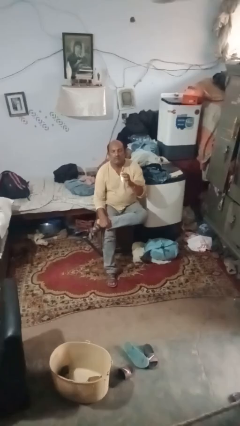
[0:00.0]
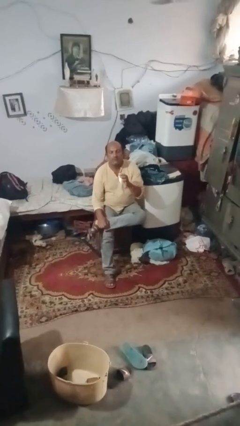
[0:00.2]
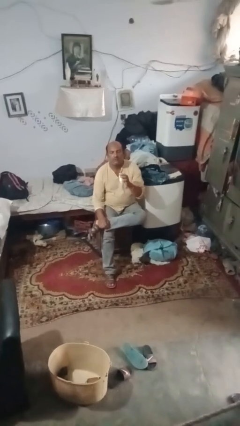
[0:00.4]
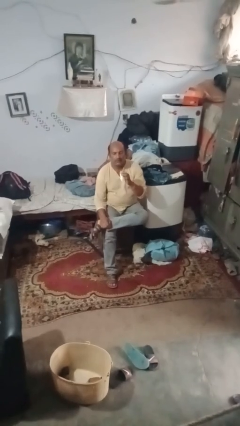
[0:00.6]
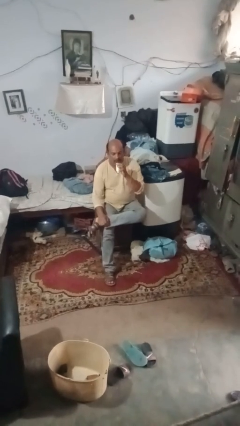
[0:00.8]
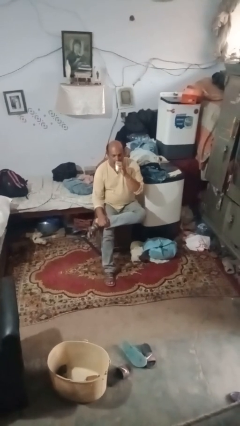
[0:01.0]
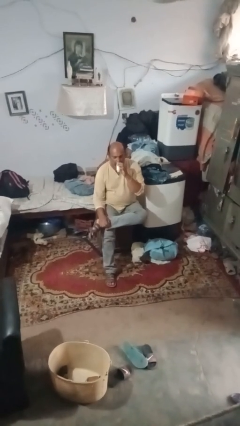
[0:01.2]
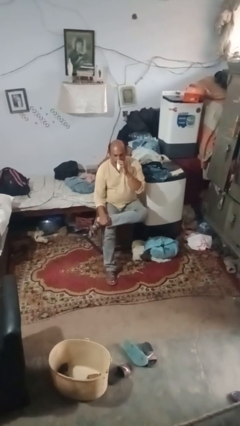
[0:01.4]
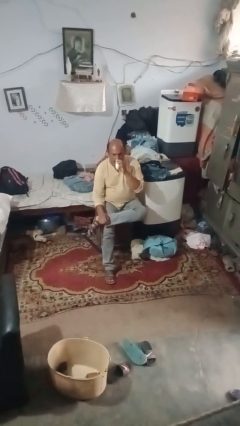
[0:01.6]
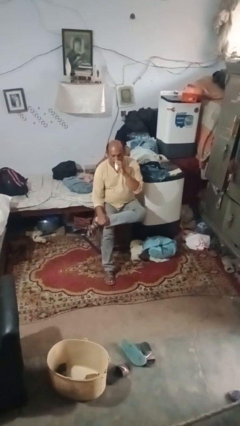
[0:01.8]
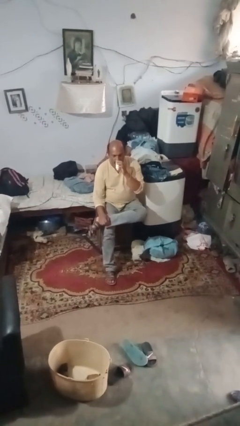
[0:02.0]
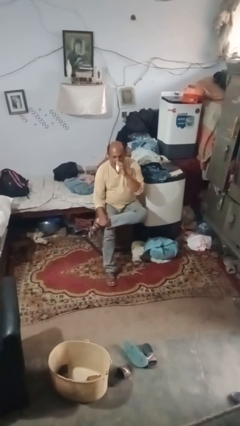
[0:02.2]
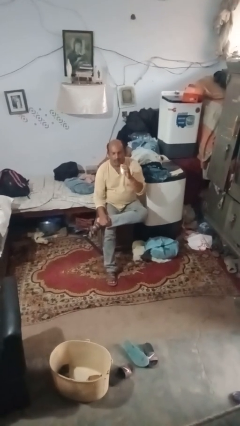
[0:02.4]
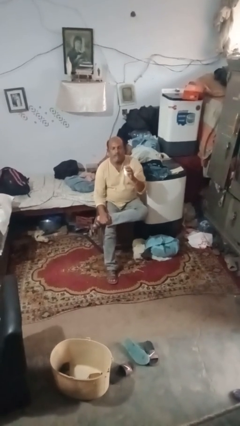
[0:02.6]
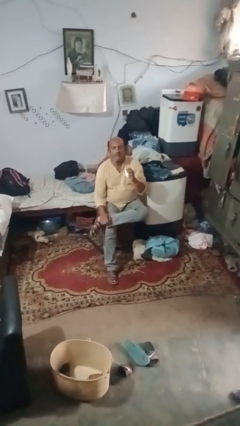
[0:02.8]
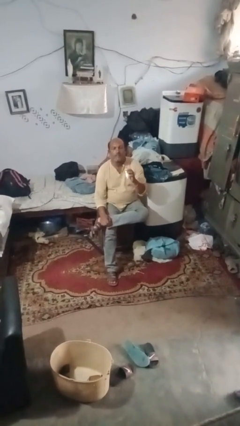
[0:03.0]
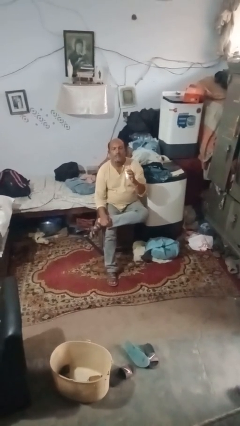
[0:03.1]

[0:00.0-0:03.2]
person vapes

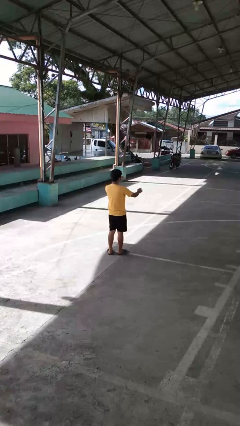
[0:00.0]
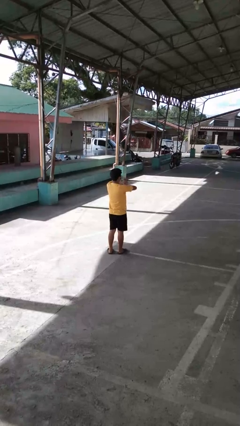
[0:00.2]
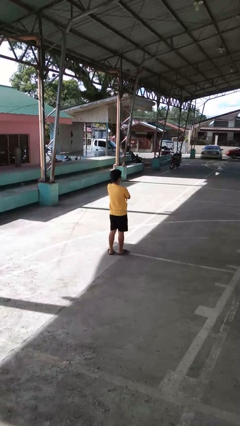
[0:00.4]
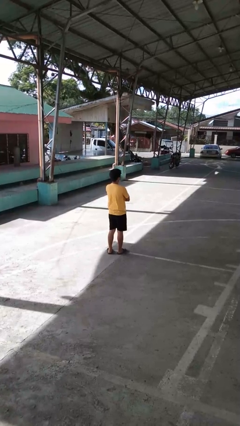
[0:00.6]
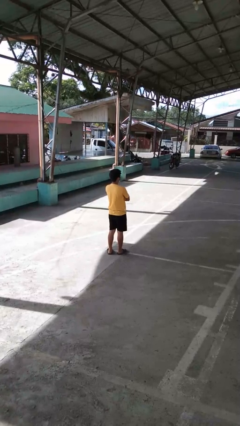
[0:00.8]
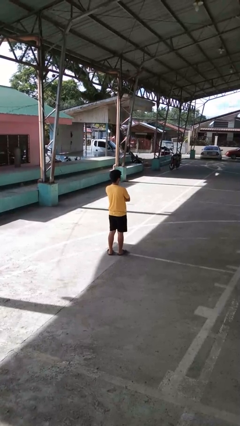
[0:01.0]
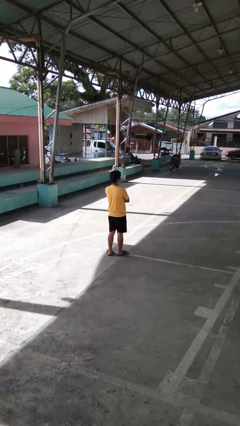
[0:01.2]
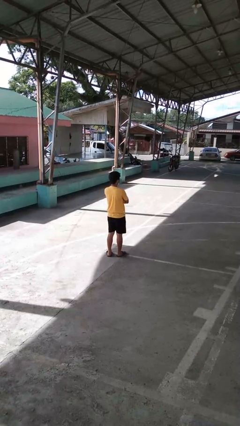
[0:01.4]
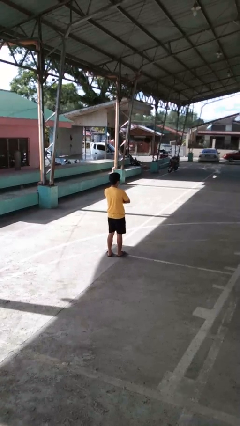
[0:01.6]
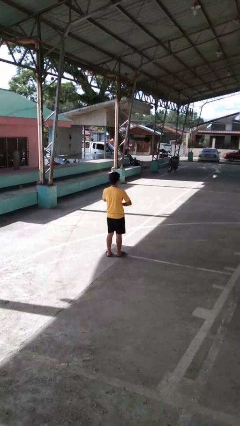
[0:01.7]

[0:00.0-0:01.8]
person crosses arms

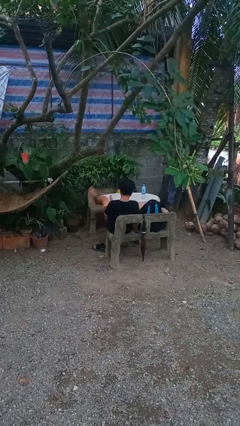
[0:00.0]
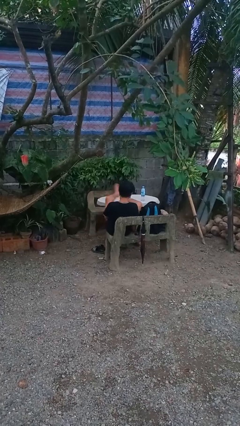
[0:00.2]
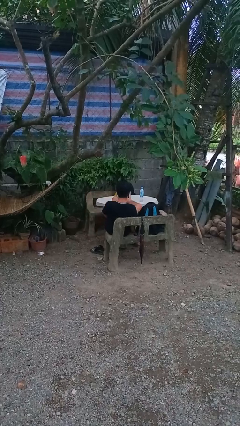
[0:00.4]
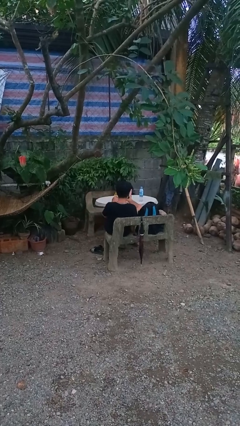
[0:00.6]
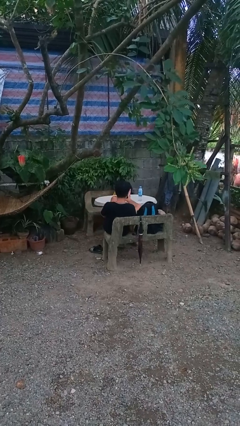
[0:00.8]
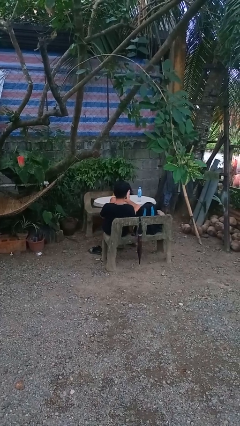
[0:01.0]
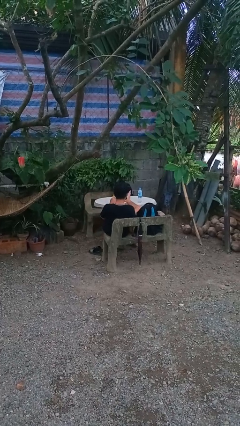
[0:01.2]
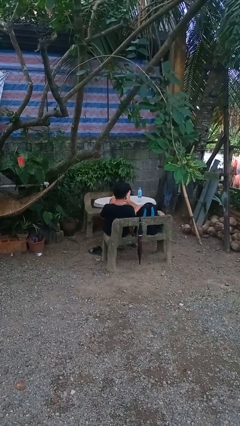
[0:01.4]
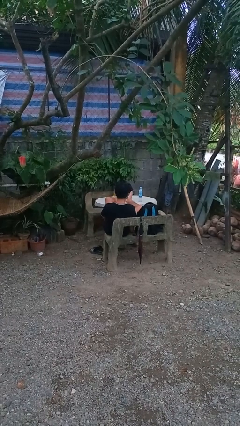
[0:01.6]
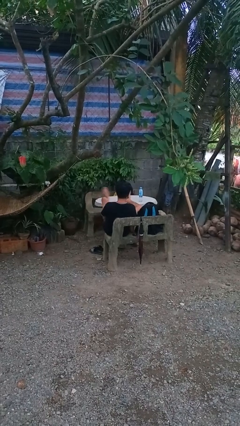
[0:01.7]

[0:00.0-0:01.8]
person puts feet up

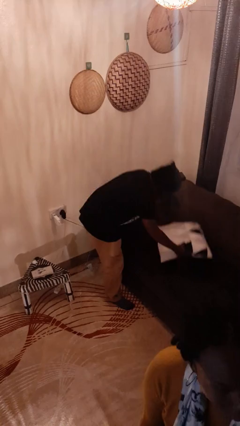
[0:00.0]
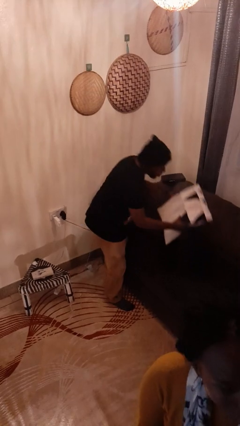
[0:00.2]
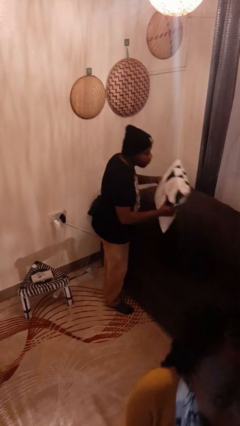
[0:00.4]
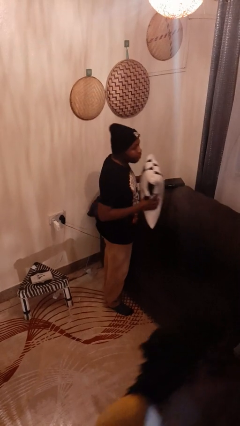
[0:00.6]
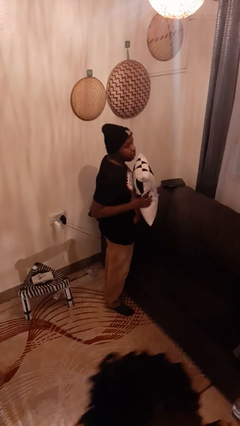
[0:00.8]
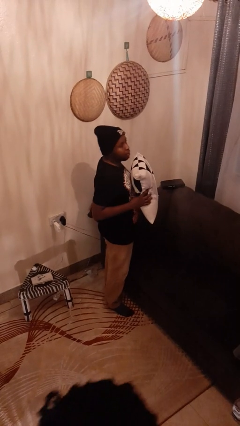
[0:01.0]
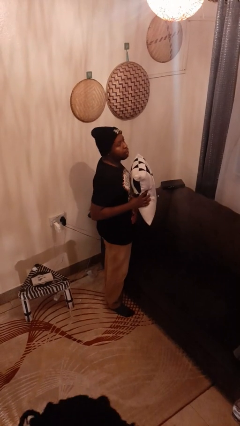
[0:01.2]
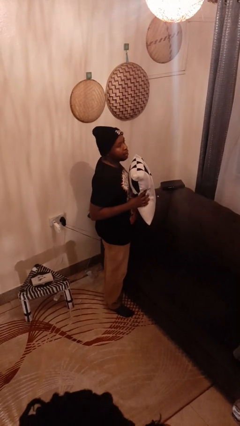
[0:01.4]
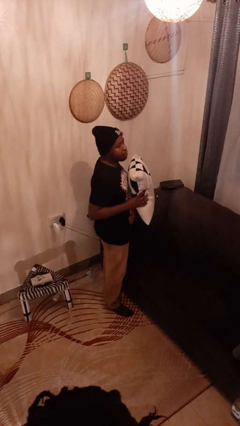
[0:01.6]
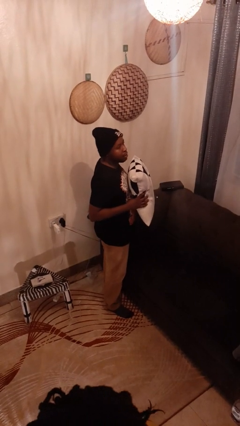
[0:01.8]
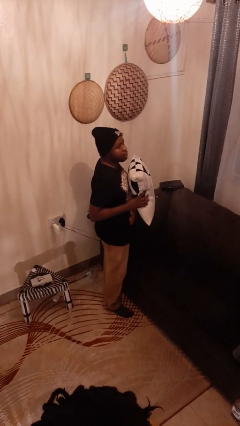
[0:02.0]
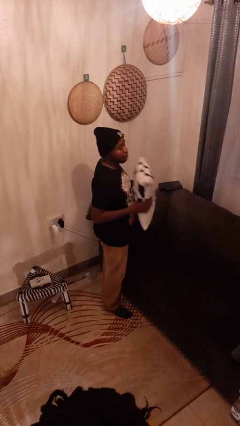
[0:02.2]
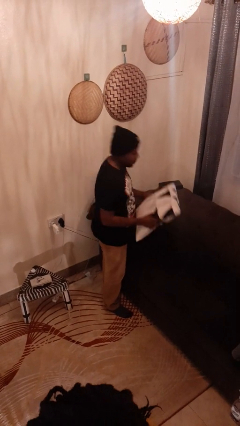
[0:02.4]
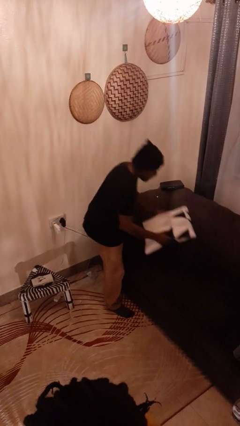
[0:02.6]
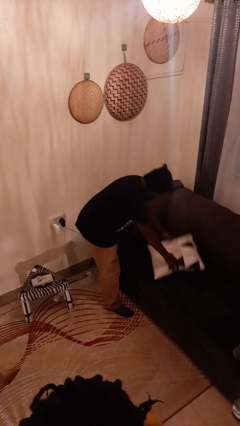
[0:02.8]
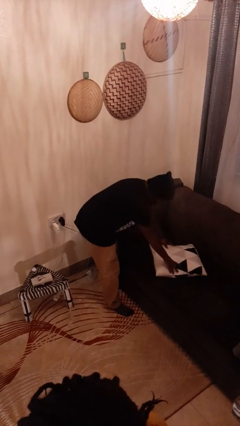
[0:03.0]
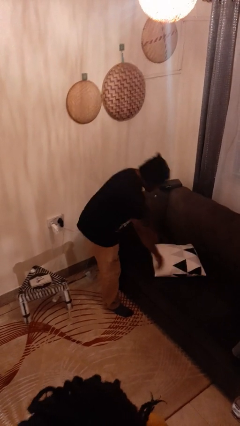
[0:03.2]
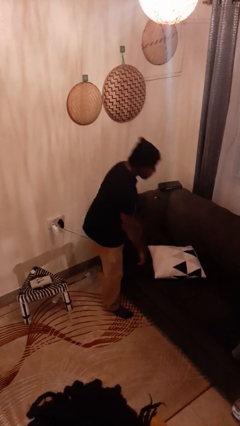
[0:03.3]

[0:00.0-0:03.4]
person picks up object from couch

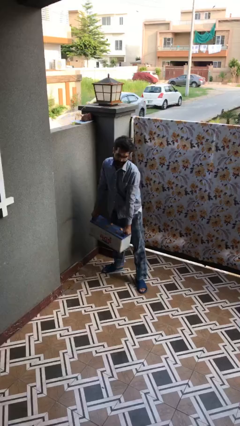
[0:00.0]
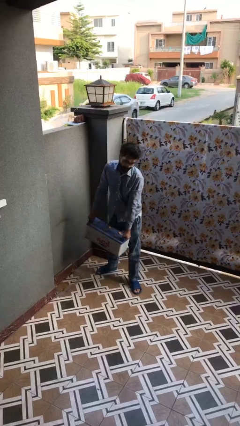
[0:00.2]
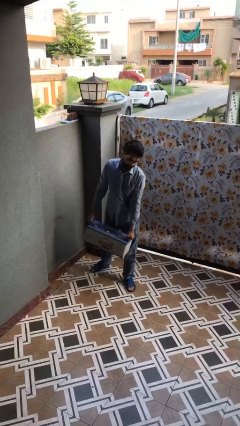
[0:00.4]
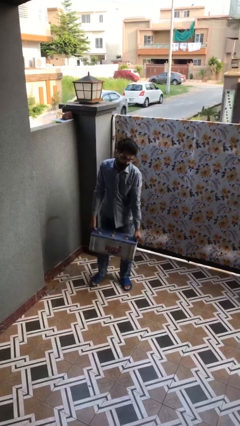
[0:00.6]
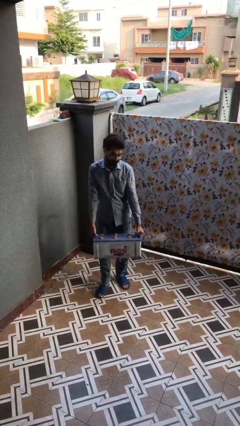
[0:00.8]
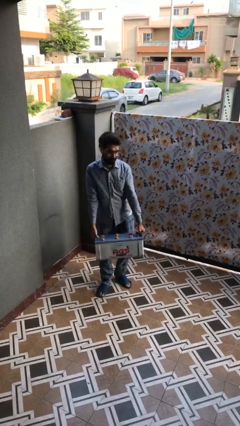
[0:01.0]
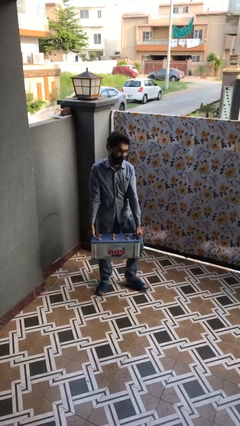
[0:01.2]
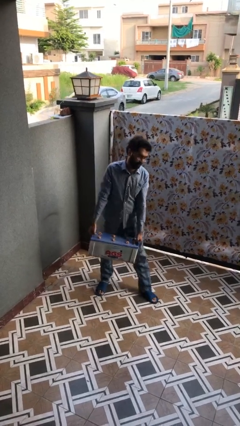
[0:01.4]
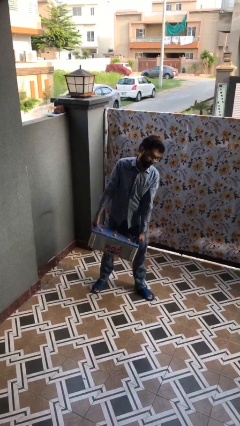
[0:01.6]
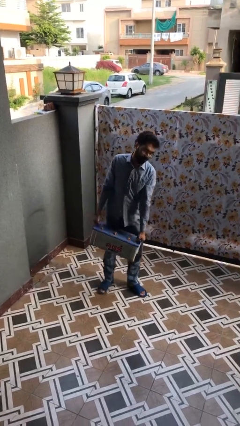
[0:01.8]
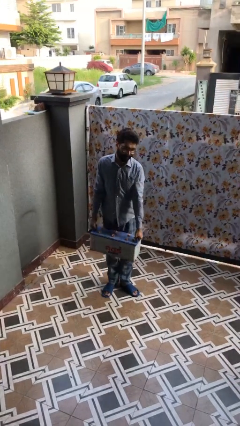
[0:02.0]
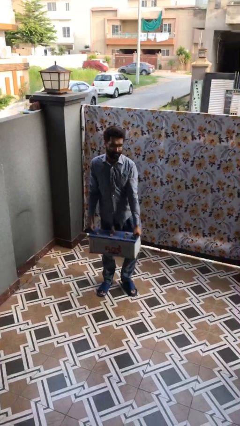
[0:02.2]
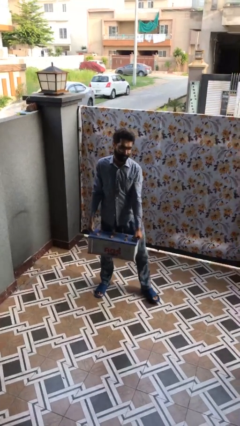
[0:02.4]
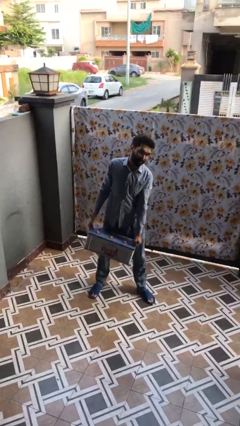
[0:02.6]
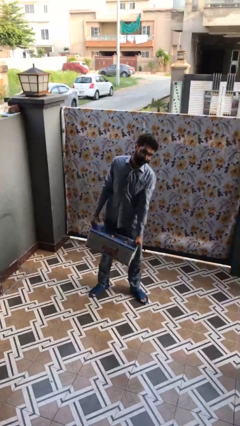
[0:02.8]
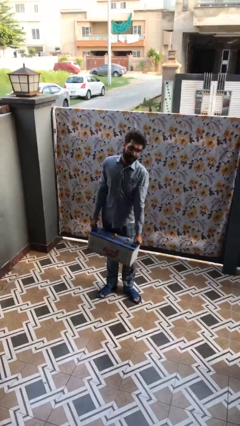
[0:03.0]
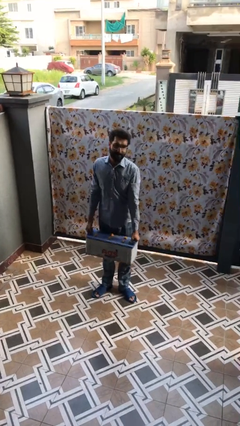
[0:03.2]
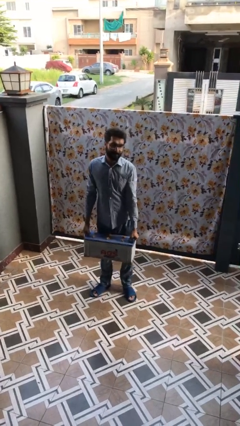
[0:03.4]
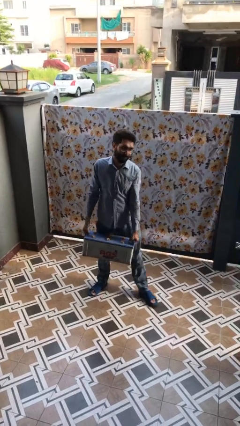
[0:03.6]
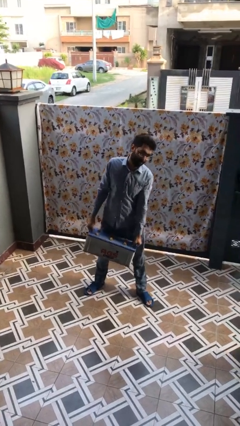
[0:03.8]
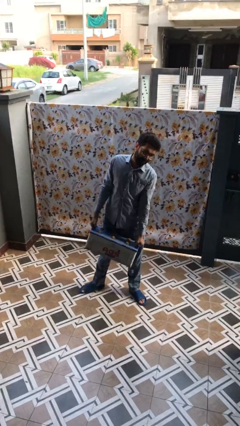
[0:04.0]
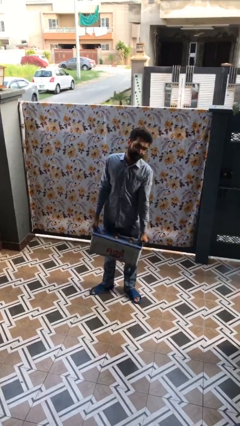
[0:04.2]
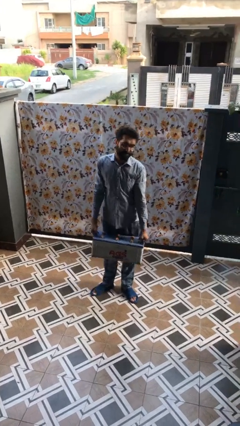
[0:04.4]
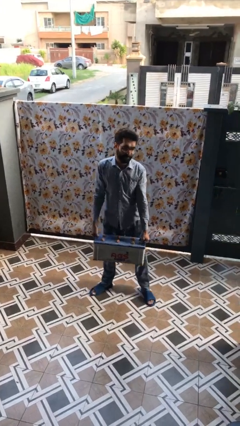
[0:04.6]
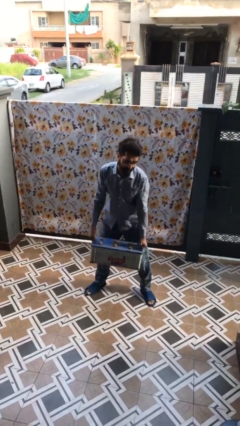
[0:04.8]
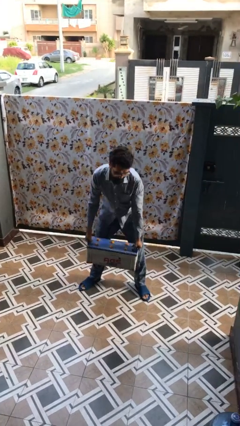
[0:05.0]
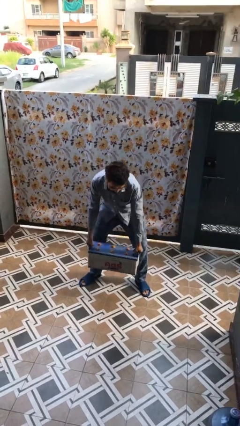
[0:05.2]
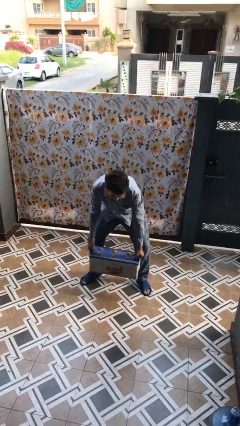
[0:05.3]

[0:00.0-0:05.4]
person carries heavy object

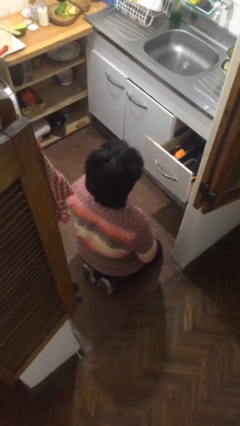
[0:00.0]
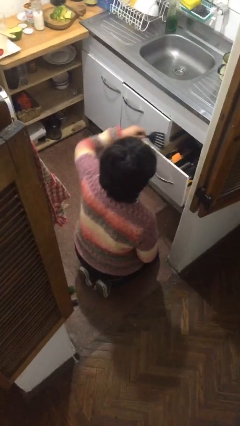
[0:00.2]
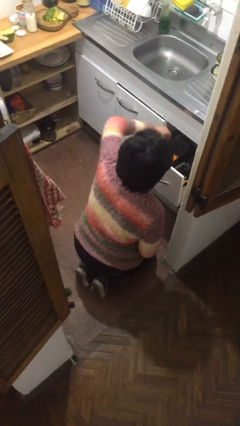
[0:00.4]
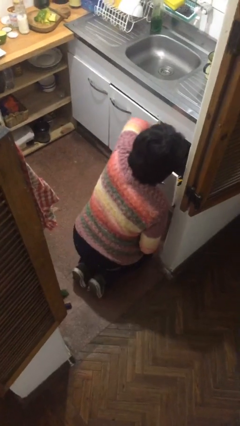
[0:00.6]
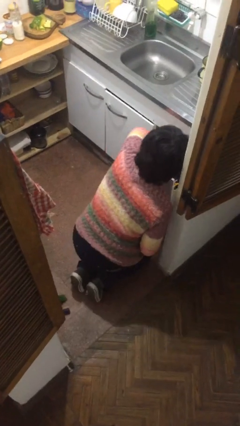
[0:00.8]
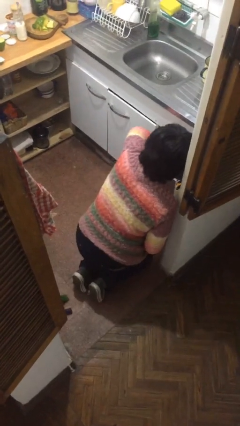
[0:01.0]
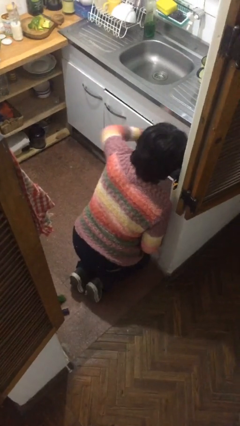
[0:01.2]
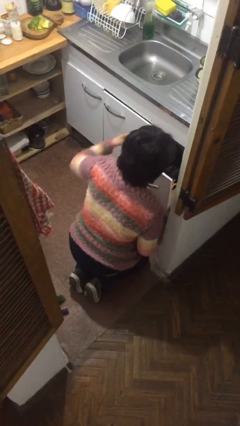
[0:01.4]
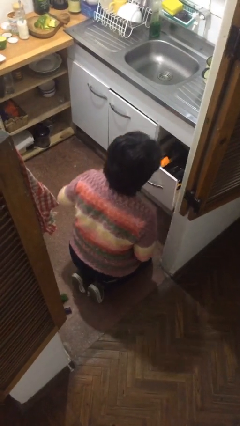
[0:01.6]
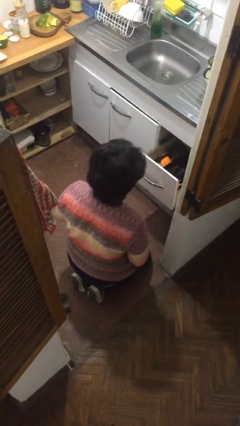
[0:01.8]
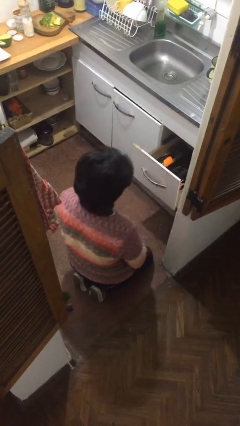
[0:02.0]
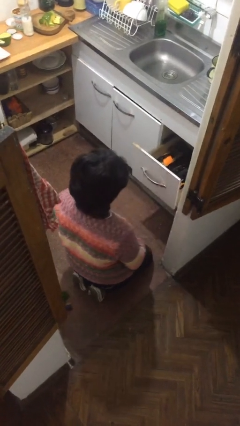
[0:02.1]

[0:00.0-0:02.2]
person puts object into kitchen drawer
